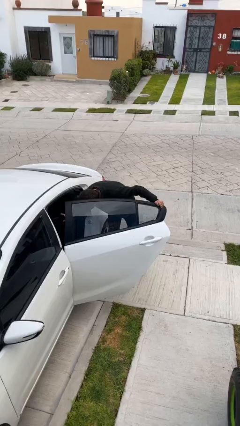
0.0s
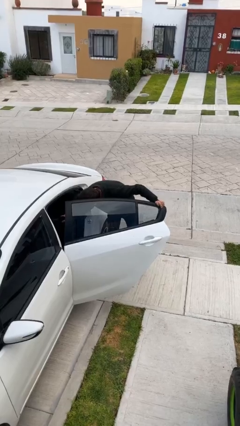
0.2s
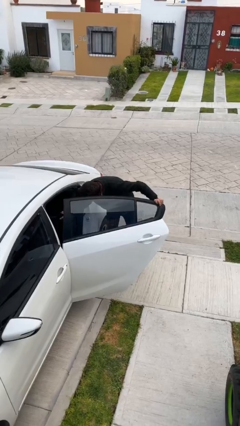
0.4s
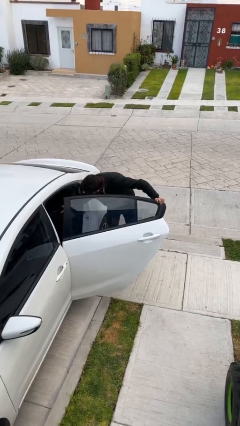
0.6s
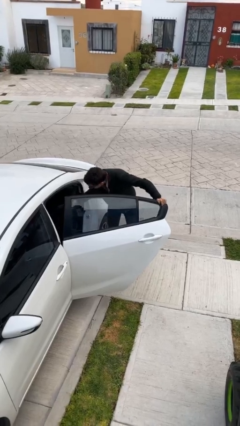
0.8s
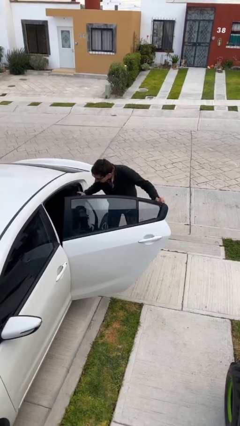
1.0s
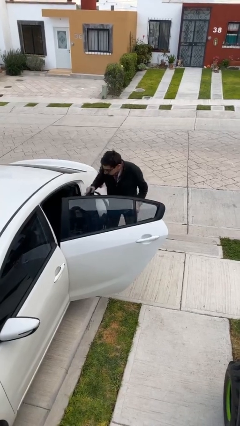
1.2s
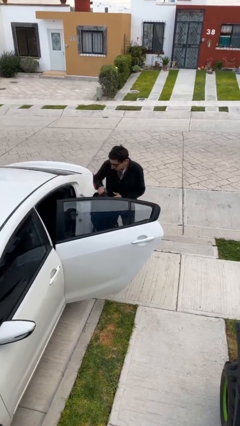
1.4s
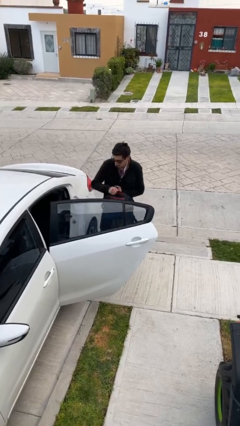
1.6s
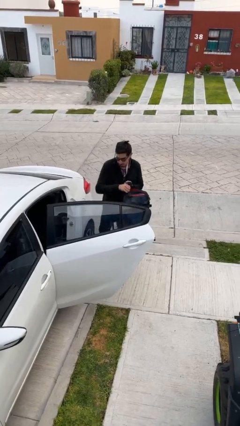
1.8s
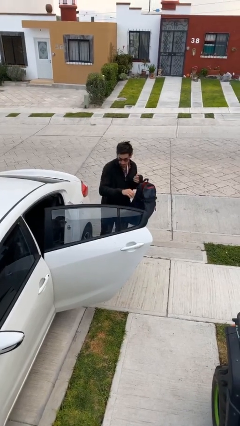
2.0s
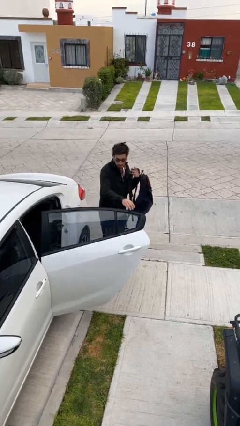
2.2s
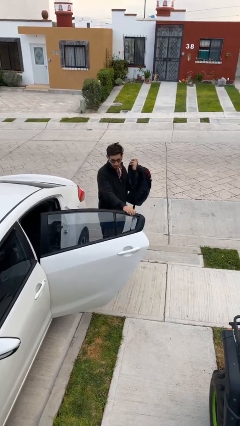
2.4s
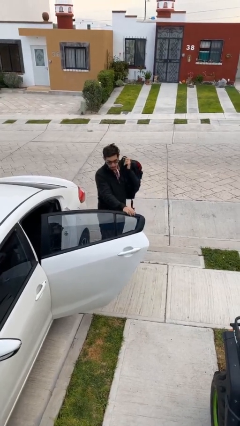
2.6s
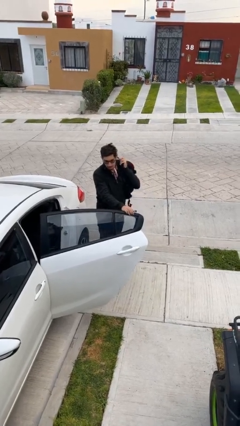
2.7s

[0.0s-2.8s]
person unloads car

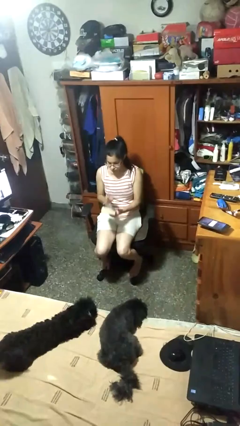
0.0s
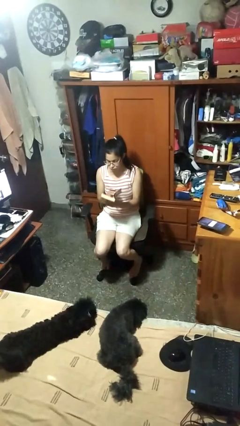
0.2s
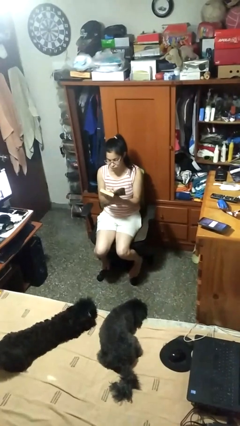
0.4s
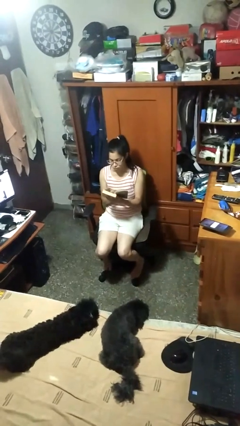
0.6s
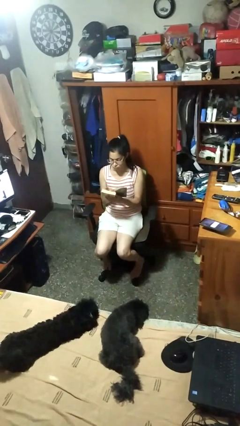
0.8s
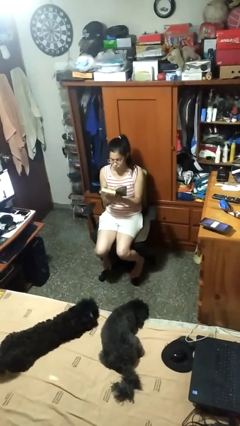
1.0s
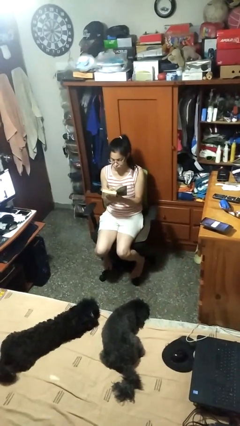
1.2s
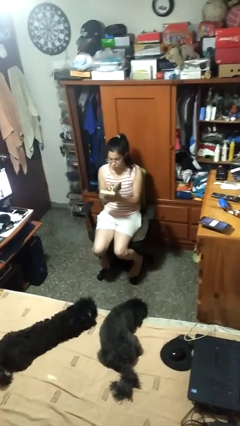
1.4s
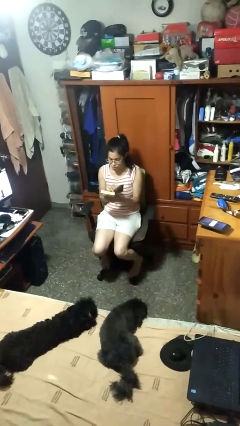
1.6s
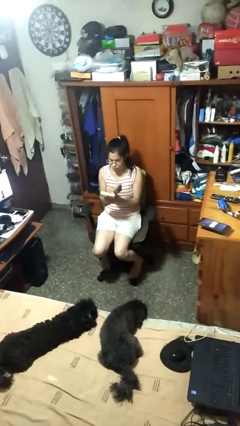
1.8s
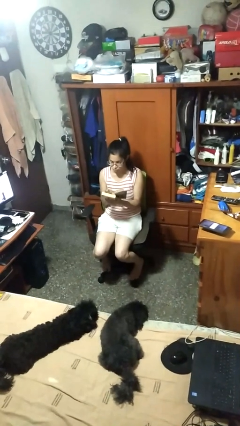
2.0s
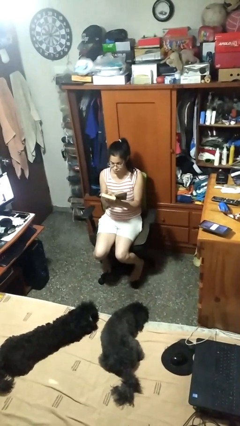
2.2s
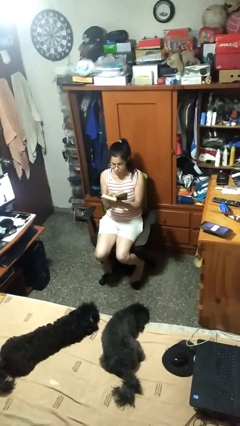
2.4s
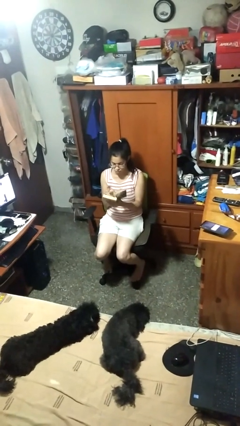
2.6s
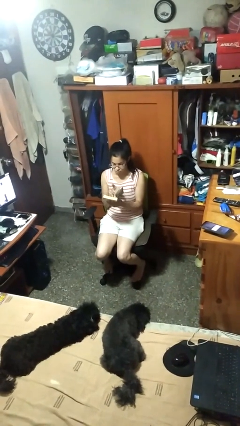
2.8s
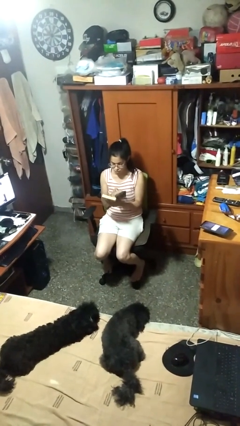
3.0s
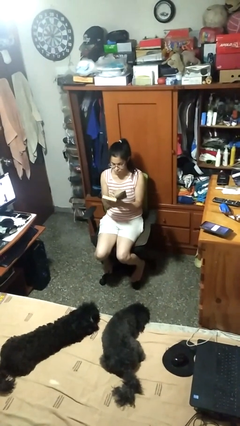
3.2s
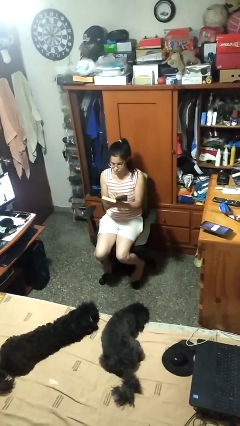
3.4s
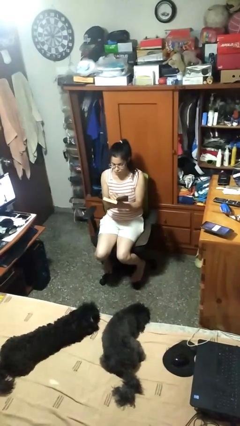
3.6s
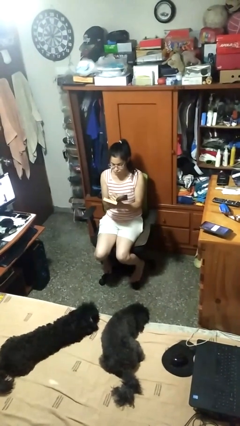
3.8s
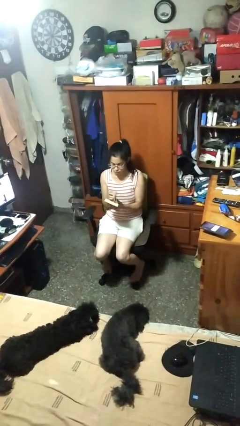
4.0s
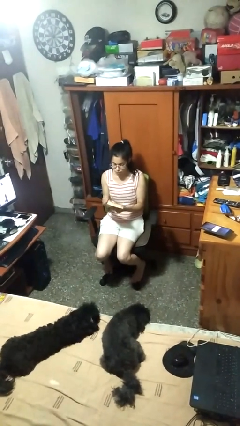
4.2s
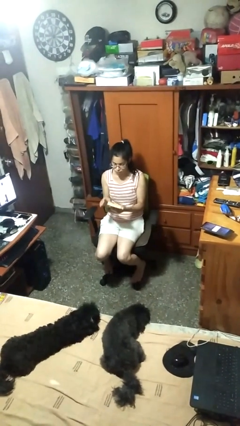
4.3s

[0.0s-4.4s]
person reads book

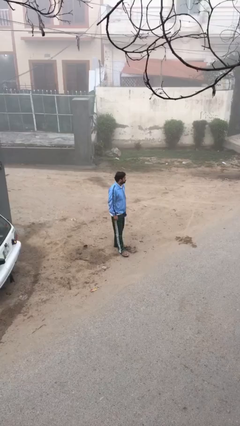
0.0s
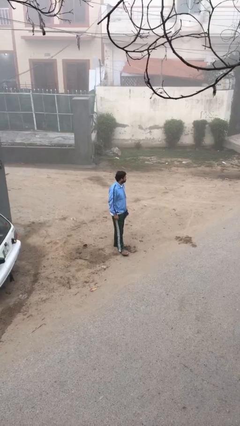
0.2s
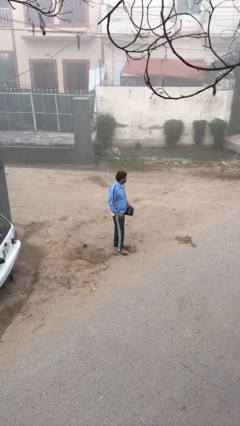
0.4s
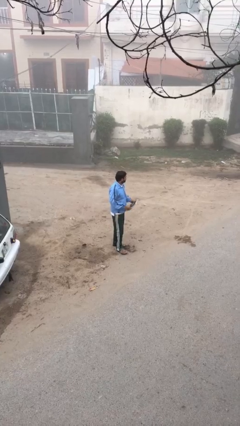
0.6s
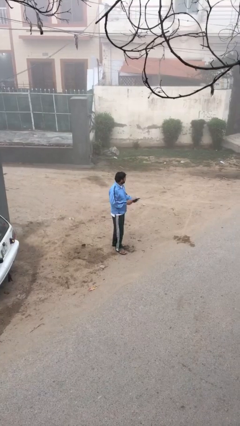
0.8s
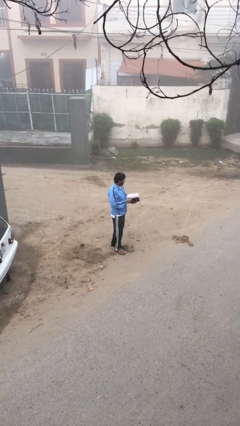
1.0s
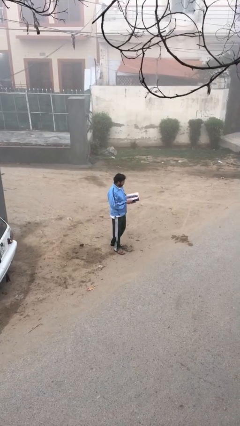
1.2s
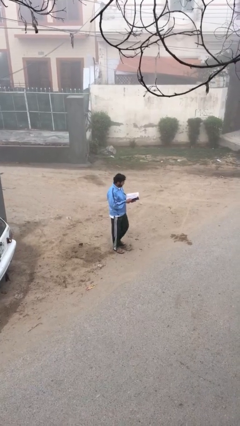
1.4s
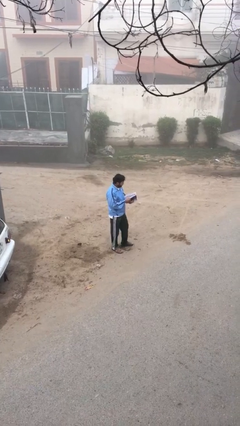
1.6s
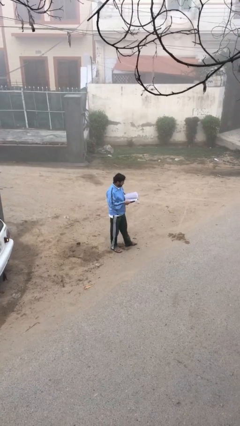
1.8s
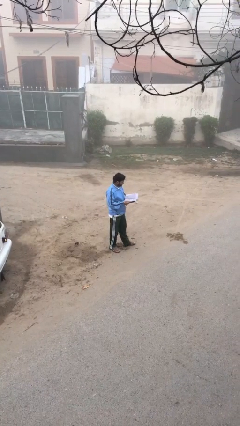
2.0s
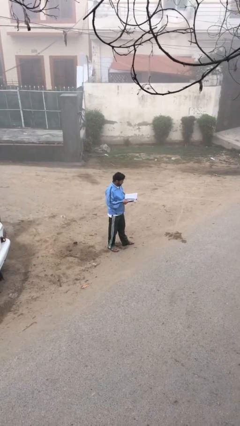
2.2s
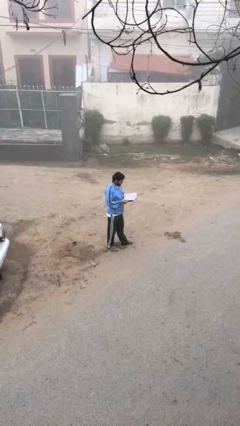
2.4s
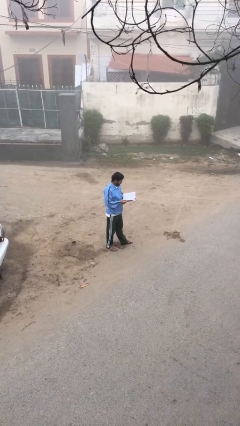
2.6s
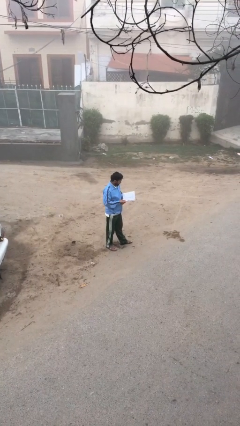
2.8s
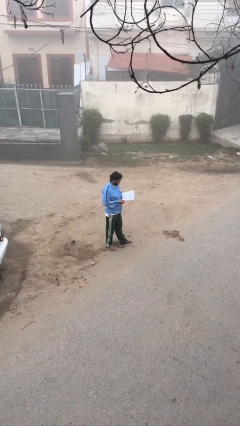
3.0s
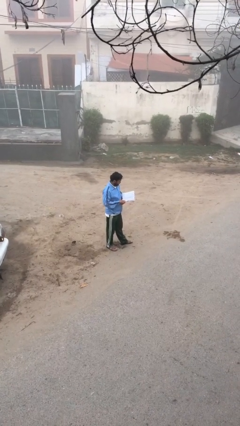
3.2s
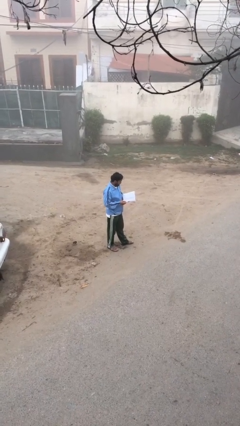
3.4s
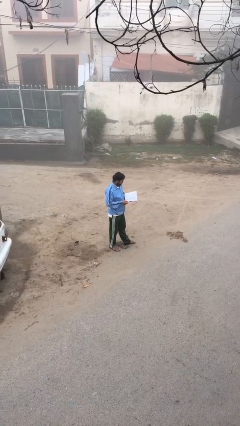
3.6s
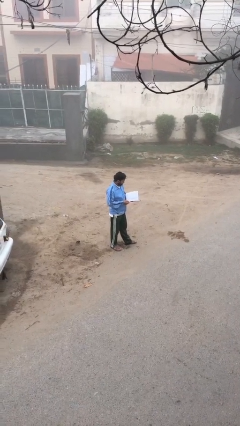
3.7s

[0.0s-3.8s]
person reads document

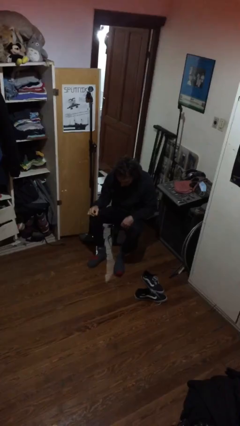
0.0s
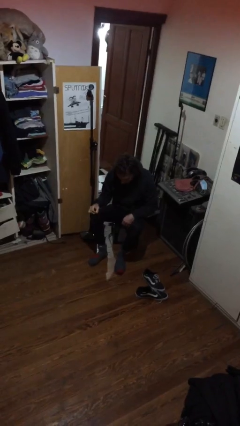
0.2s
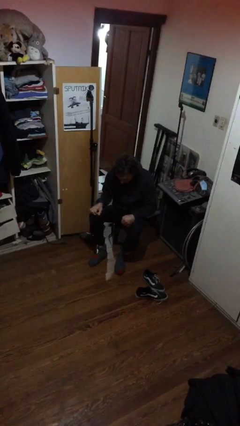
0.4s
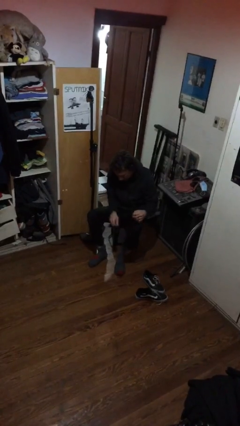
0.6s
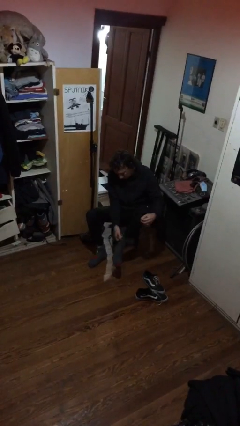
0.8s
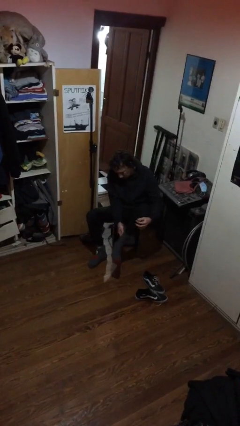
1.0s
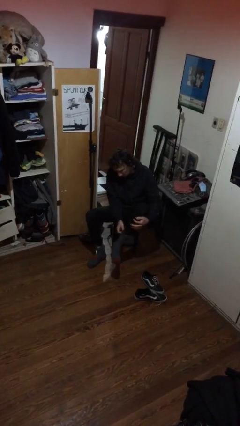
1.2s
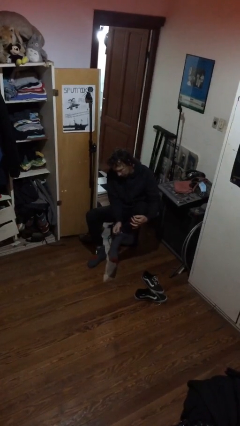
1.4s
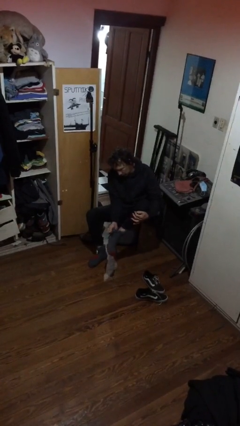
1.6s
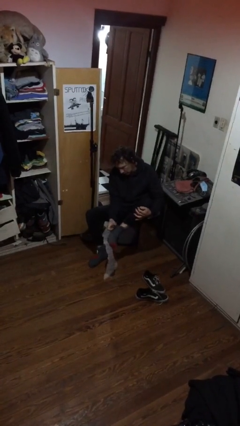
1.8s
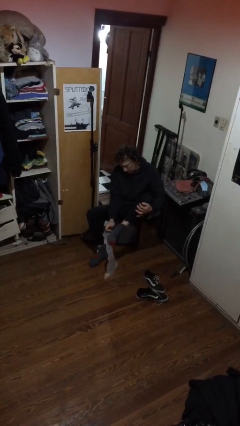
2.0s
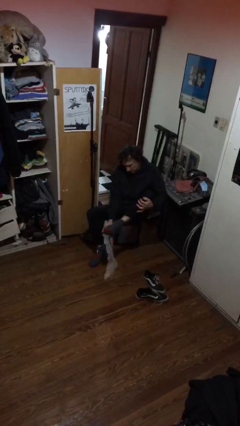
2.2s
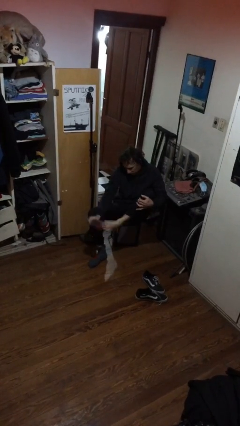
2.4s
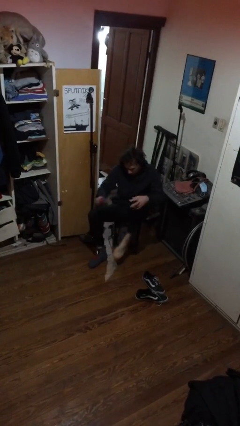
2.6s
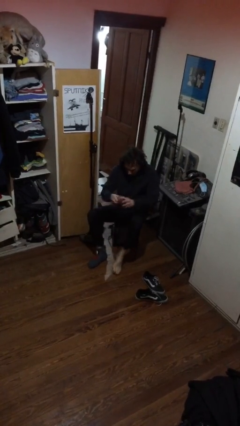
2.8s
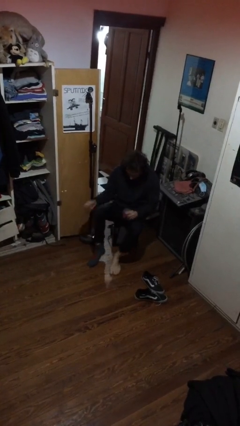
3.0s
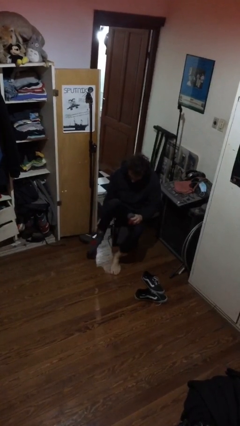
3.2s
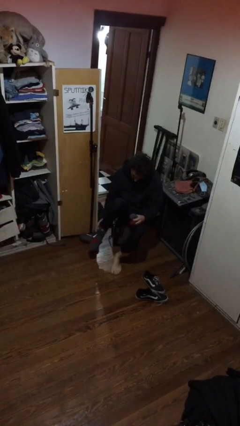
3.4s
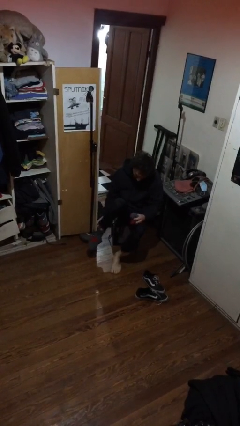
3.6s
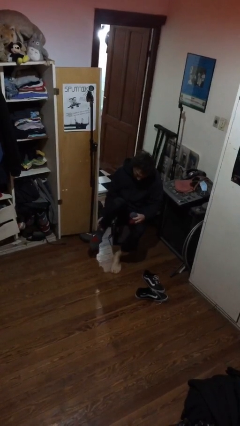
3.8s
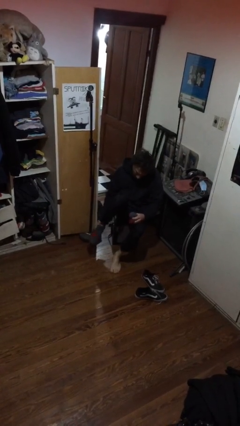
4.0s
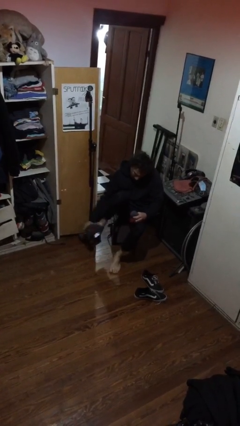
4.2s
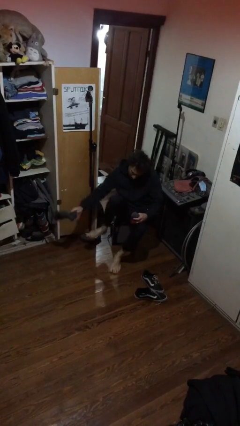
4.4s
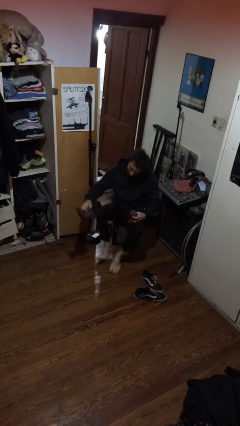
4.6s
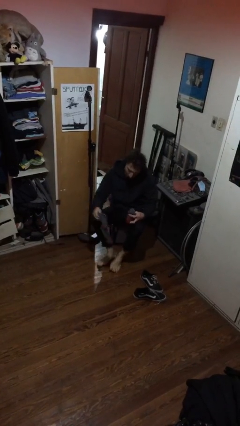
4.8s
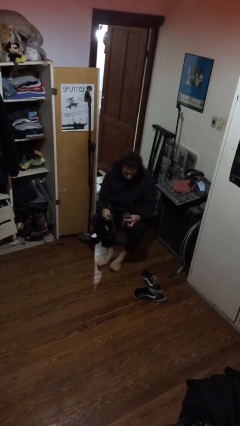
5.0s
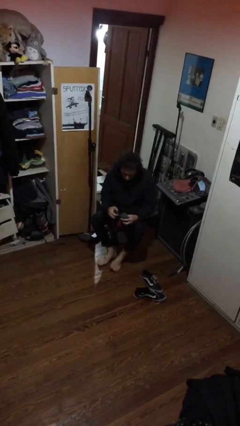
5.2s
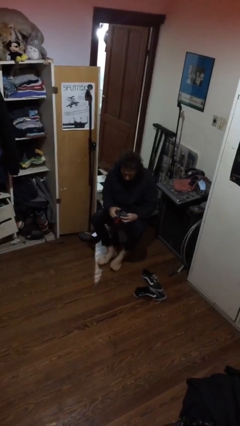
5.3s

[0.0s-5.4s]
person takes off socks

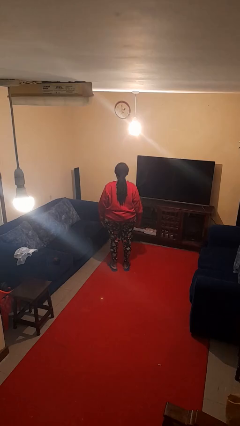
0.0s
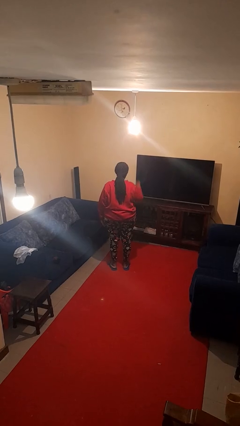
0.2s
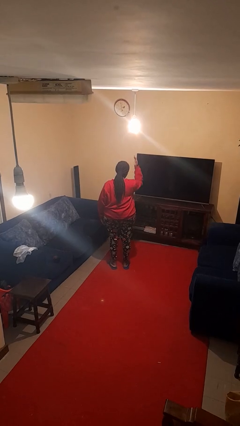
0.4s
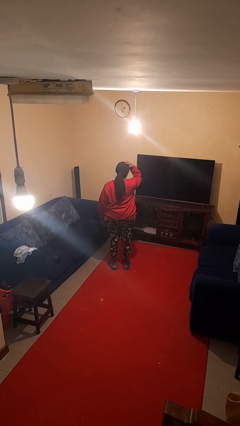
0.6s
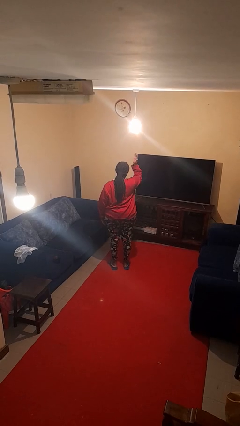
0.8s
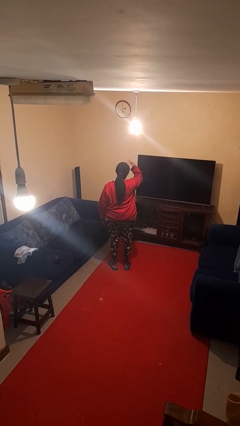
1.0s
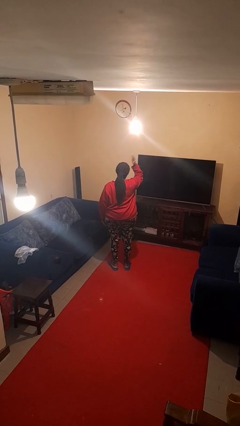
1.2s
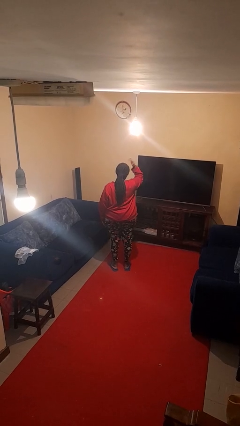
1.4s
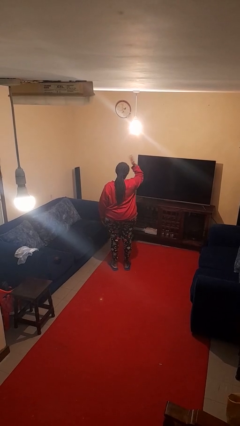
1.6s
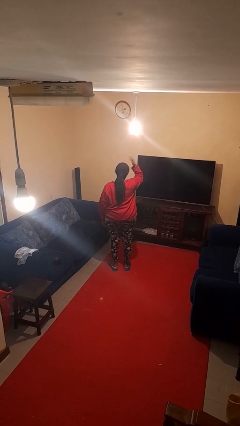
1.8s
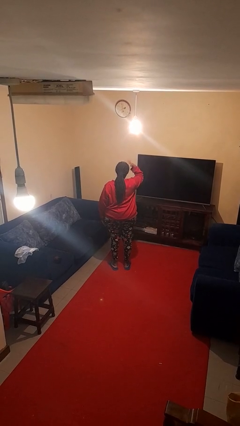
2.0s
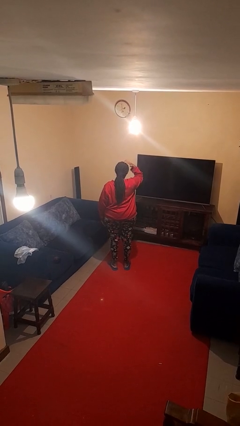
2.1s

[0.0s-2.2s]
person pats head
